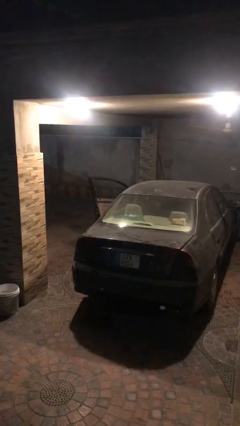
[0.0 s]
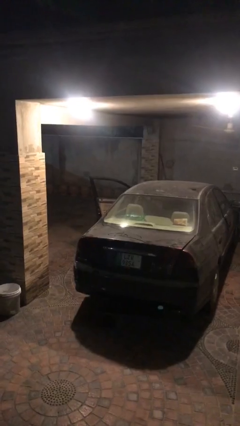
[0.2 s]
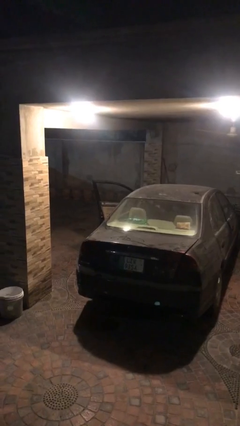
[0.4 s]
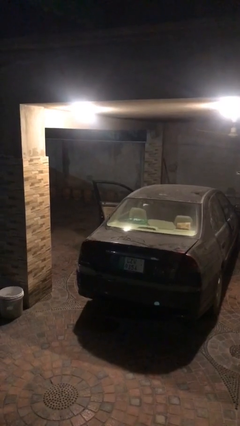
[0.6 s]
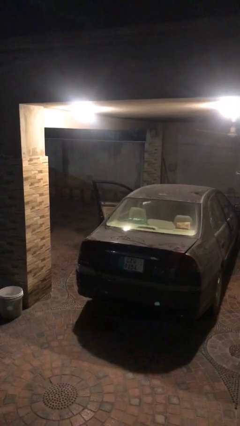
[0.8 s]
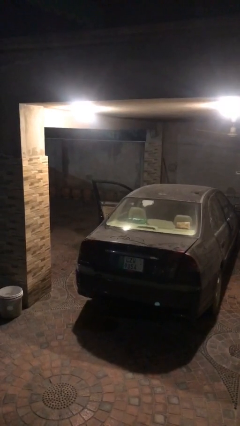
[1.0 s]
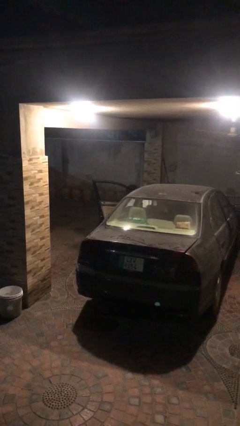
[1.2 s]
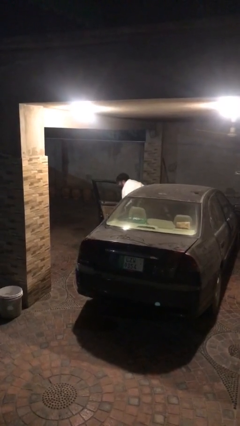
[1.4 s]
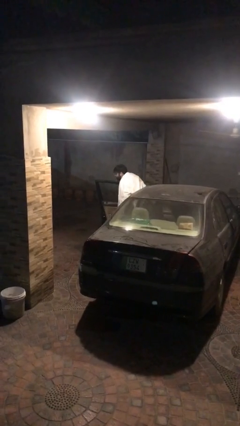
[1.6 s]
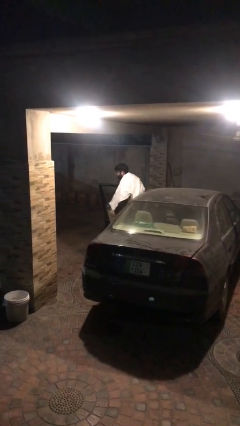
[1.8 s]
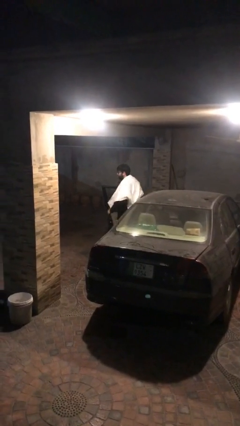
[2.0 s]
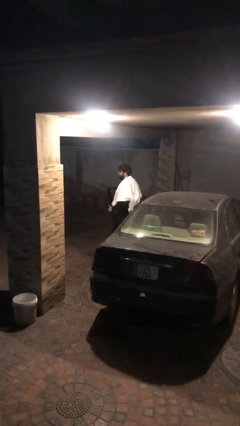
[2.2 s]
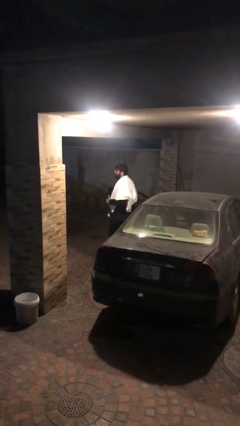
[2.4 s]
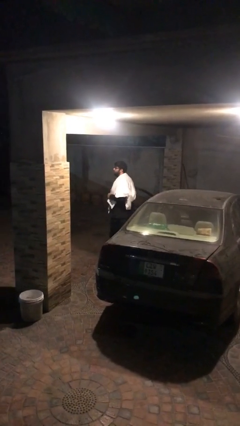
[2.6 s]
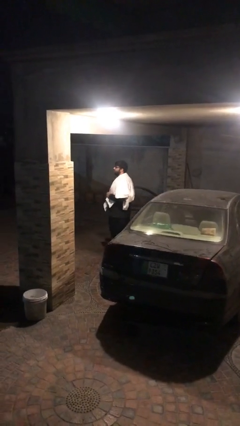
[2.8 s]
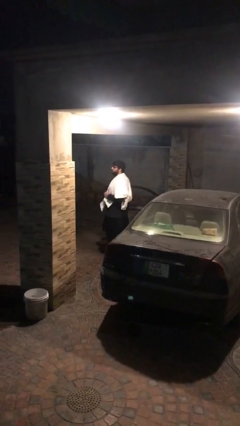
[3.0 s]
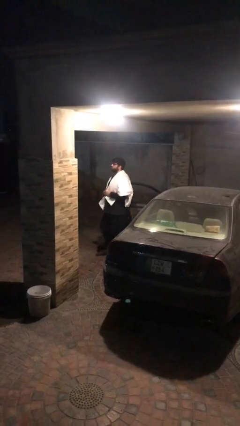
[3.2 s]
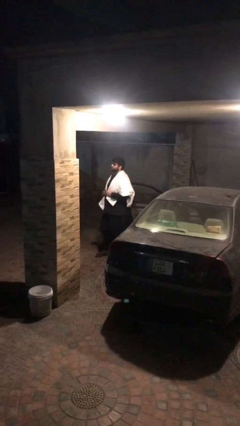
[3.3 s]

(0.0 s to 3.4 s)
person exits car

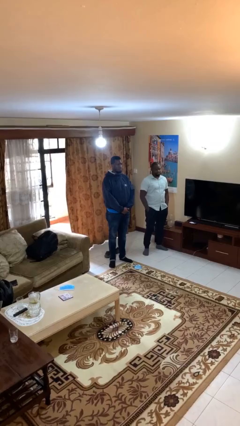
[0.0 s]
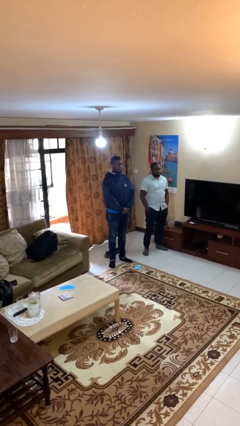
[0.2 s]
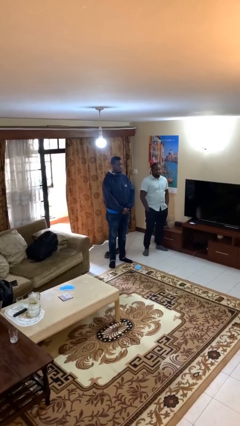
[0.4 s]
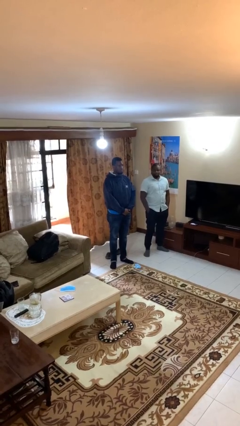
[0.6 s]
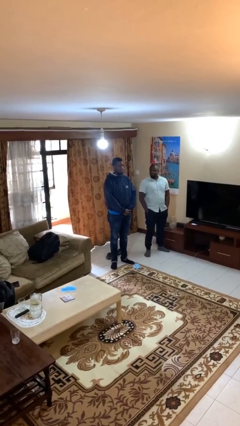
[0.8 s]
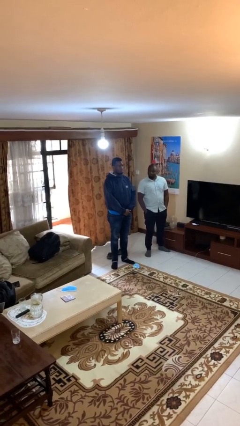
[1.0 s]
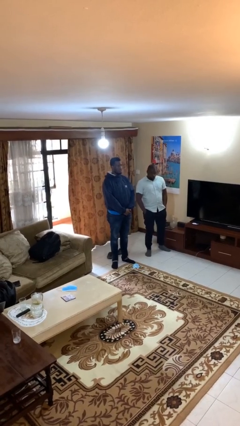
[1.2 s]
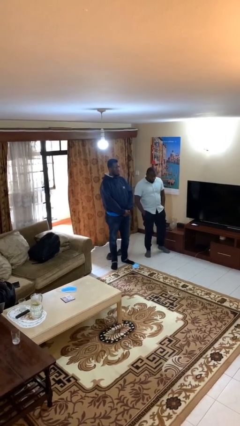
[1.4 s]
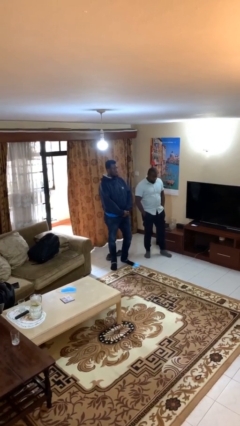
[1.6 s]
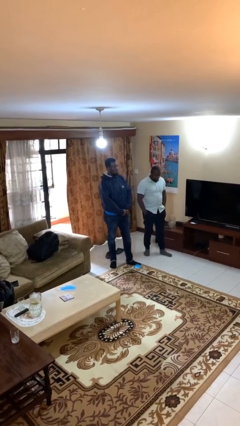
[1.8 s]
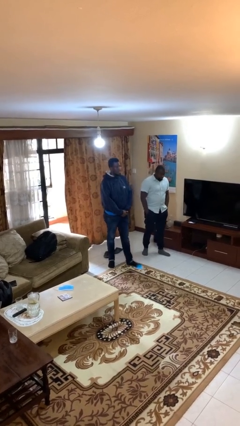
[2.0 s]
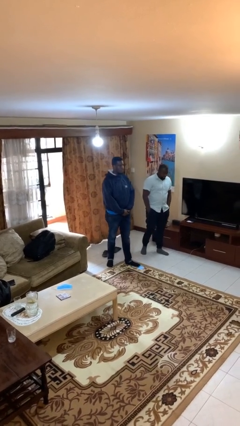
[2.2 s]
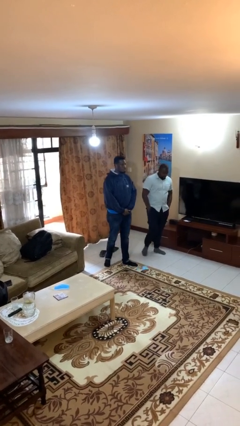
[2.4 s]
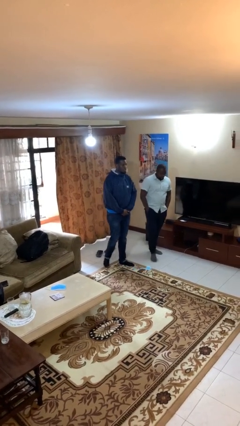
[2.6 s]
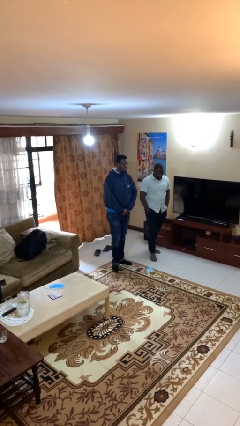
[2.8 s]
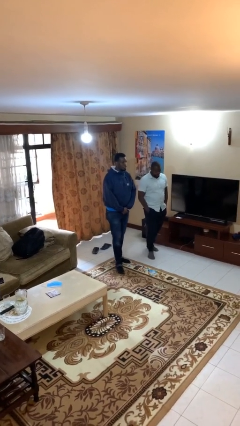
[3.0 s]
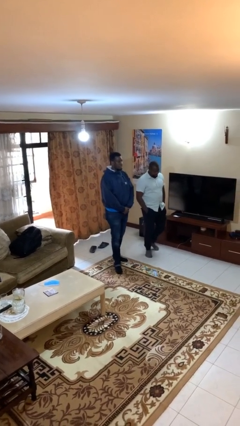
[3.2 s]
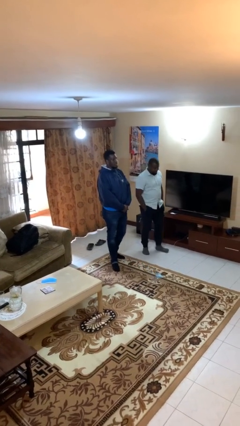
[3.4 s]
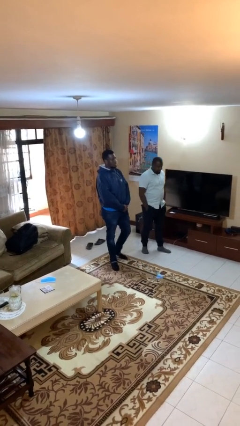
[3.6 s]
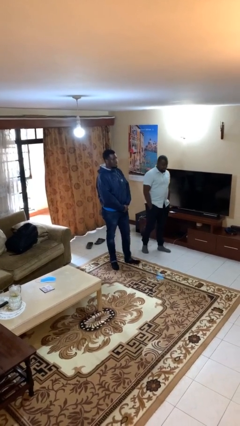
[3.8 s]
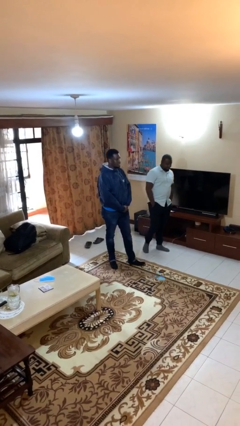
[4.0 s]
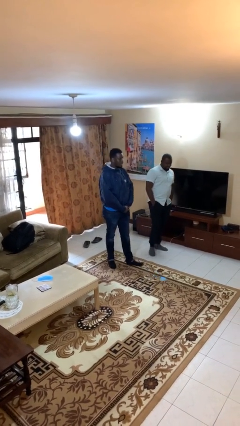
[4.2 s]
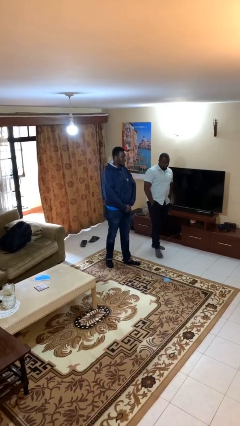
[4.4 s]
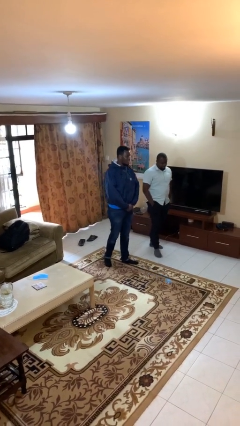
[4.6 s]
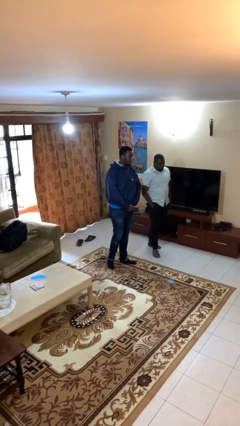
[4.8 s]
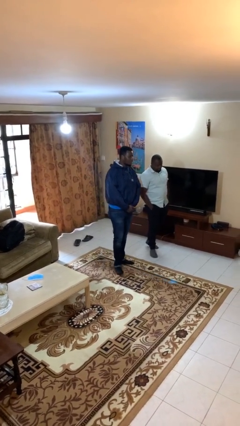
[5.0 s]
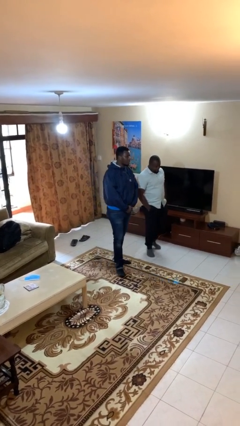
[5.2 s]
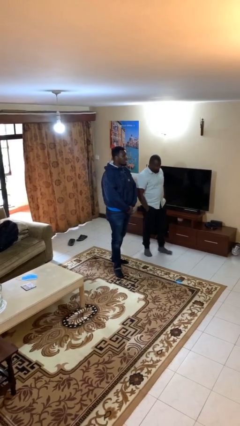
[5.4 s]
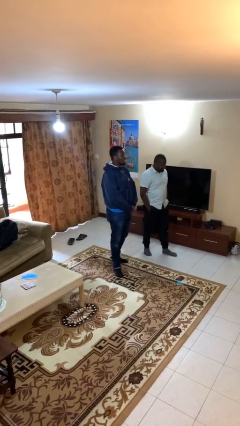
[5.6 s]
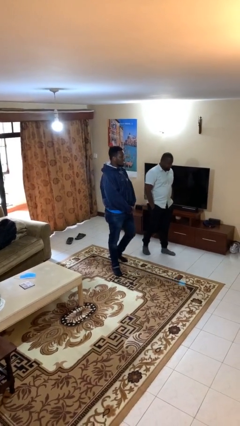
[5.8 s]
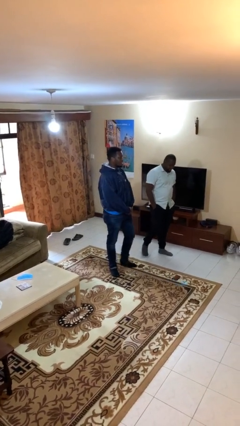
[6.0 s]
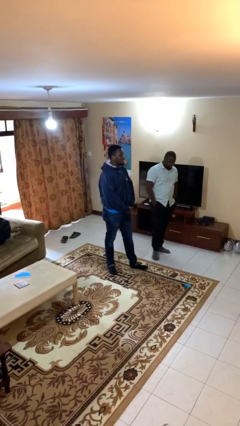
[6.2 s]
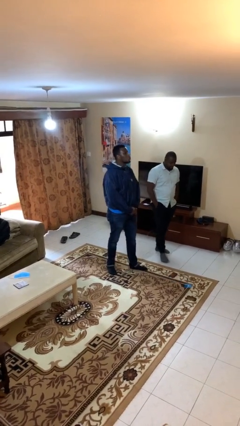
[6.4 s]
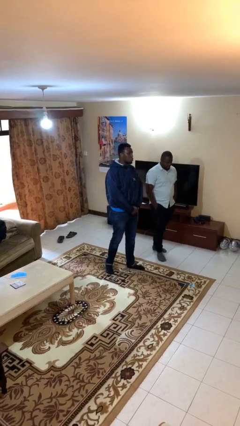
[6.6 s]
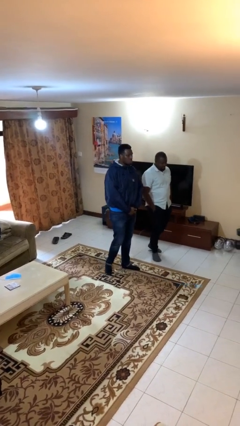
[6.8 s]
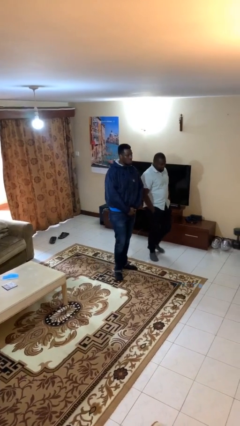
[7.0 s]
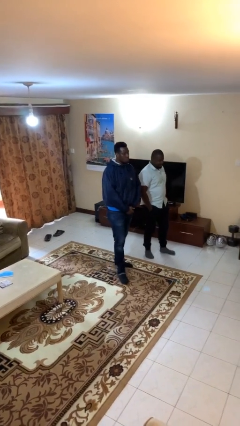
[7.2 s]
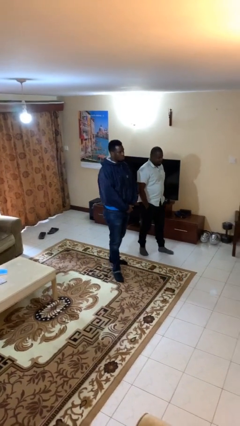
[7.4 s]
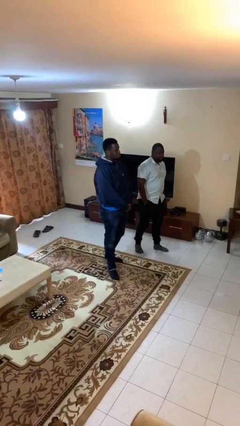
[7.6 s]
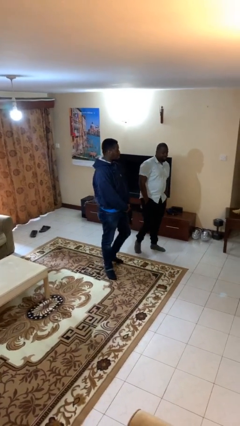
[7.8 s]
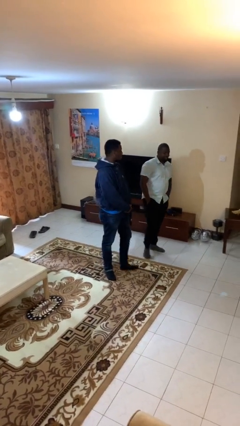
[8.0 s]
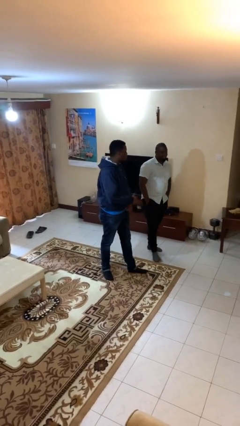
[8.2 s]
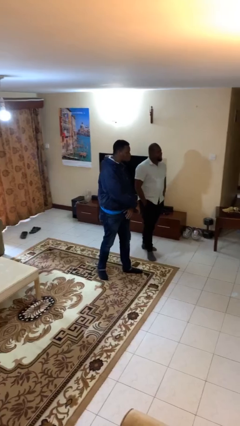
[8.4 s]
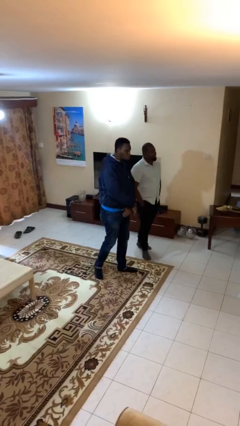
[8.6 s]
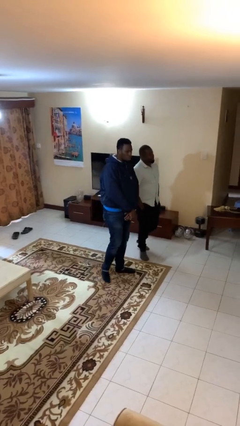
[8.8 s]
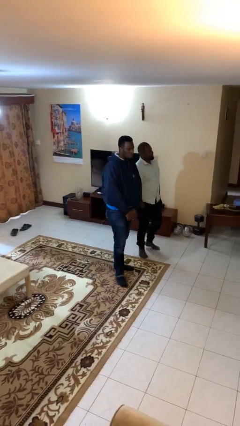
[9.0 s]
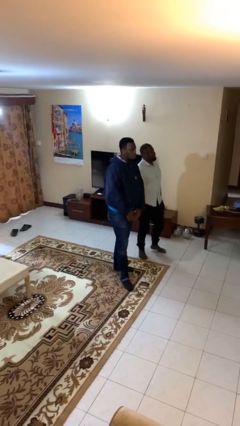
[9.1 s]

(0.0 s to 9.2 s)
person talks to person

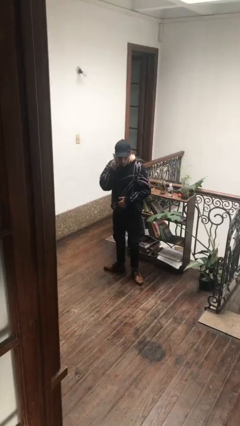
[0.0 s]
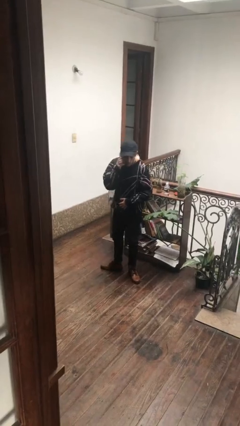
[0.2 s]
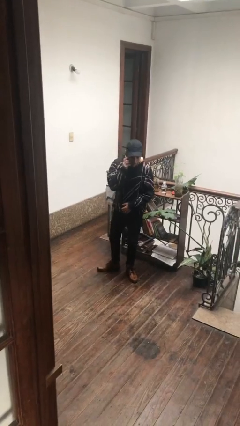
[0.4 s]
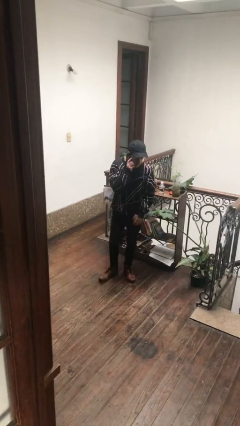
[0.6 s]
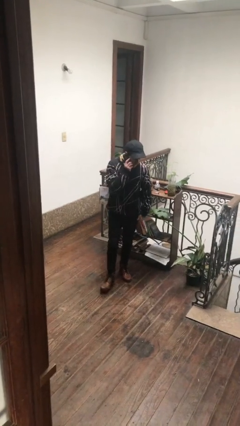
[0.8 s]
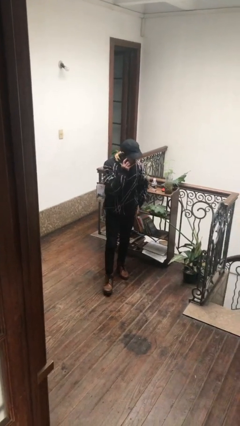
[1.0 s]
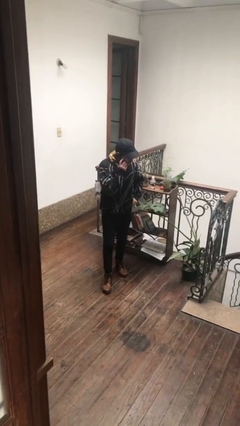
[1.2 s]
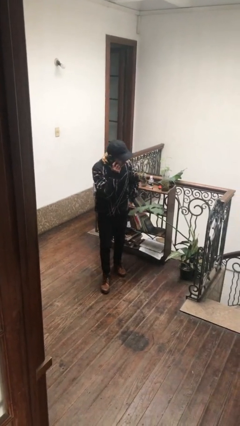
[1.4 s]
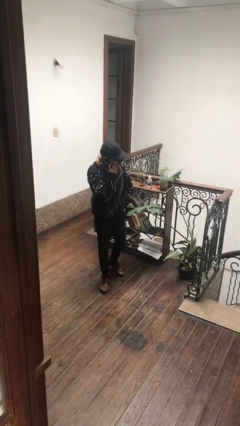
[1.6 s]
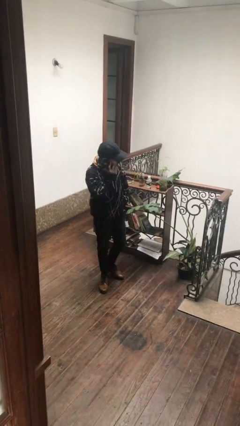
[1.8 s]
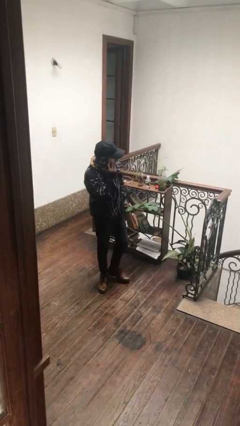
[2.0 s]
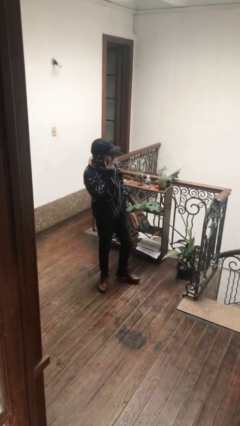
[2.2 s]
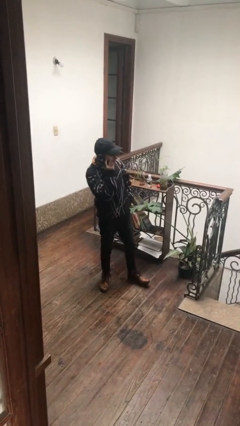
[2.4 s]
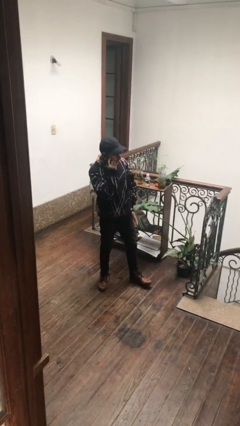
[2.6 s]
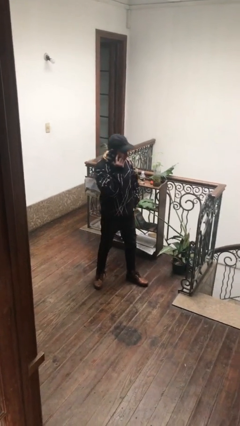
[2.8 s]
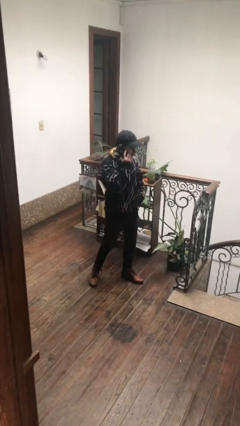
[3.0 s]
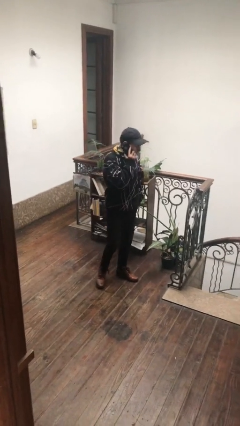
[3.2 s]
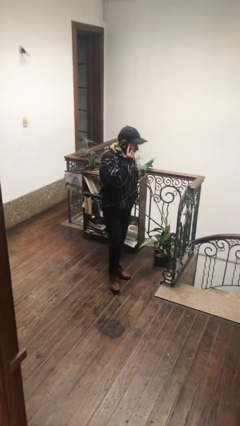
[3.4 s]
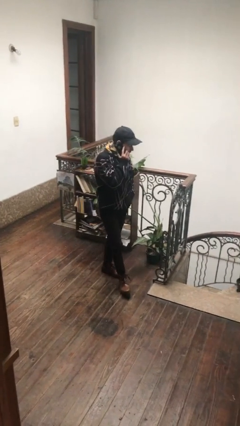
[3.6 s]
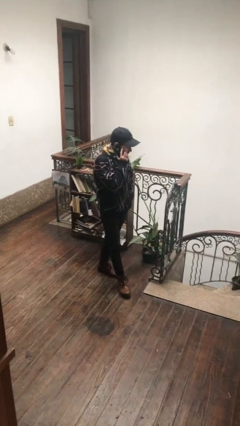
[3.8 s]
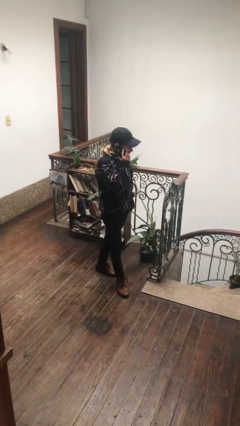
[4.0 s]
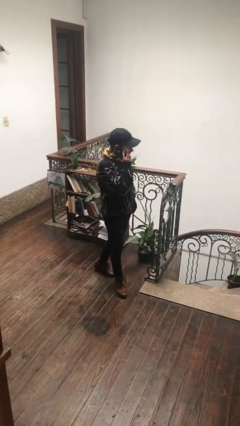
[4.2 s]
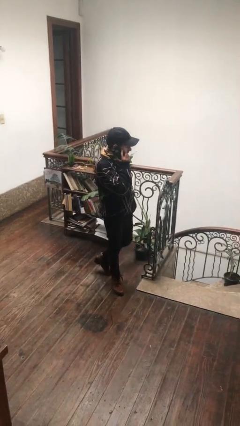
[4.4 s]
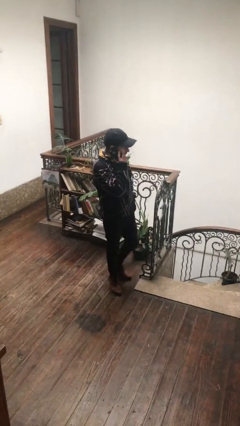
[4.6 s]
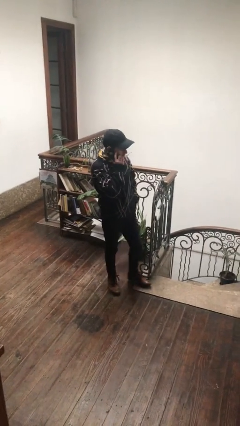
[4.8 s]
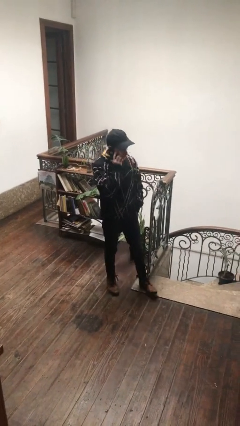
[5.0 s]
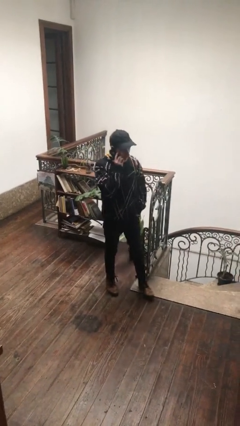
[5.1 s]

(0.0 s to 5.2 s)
person talks on phone
